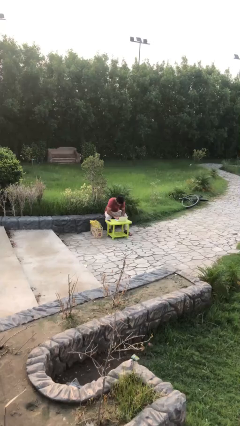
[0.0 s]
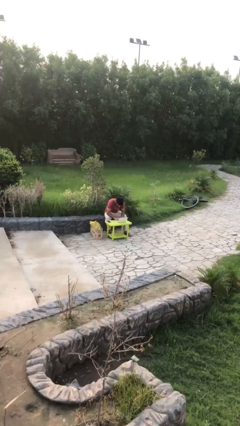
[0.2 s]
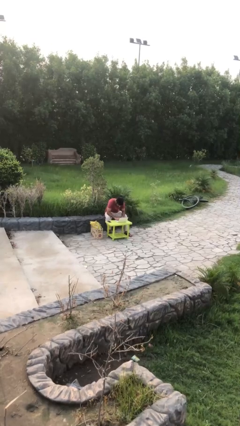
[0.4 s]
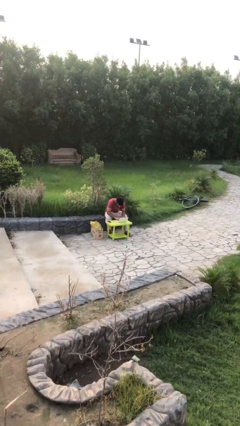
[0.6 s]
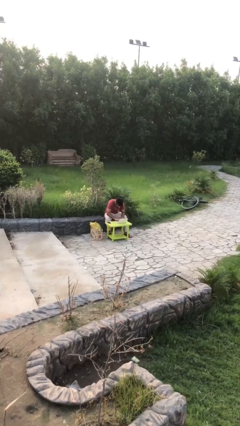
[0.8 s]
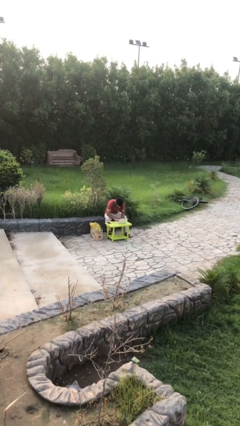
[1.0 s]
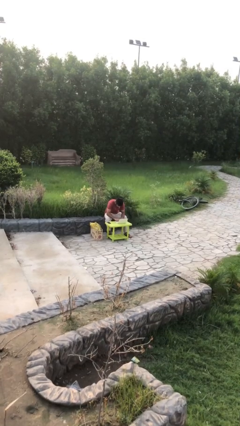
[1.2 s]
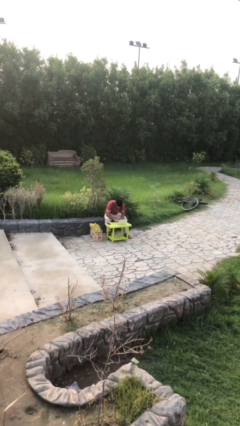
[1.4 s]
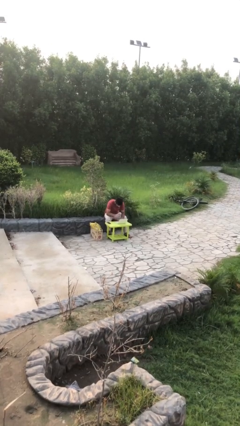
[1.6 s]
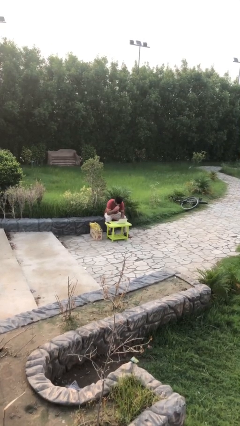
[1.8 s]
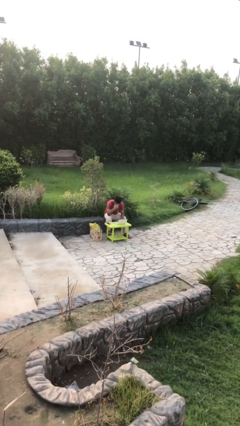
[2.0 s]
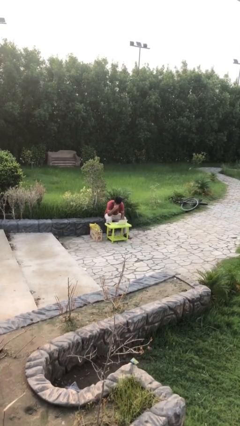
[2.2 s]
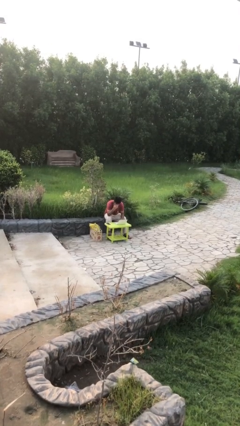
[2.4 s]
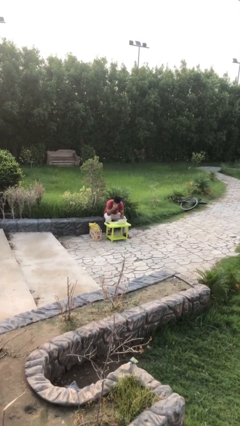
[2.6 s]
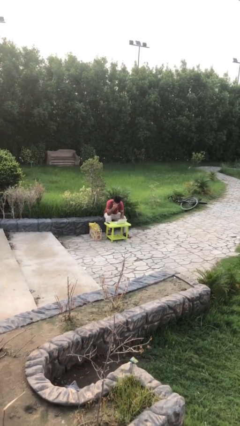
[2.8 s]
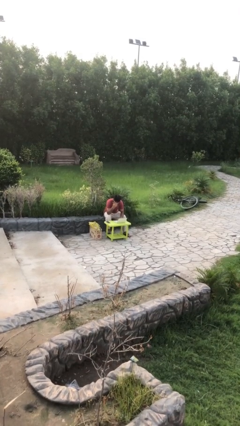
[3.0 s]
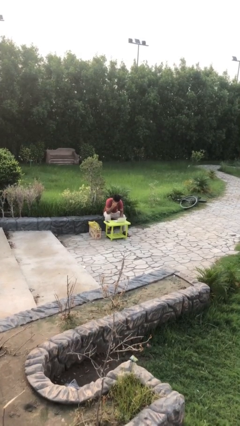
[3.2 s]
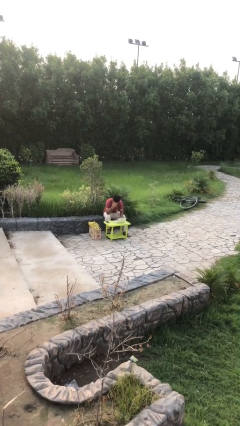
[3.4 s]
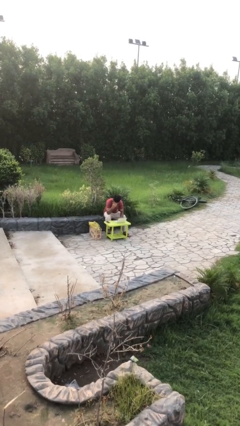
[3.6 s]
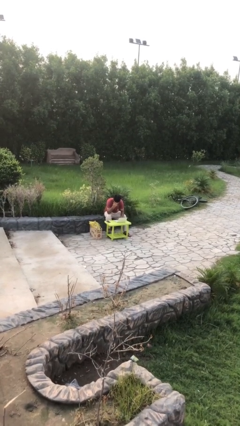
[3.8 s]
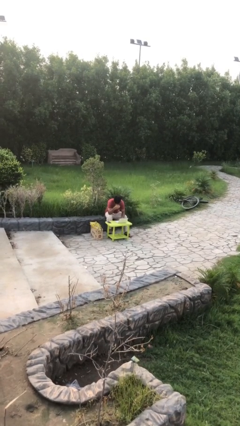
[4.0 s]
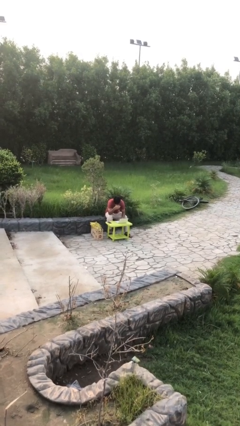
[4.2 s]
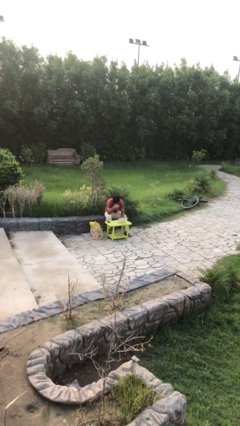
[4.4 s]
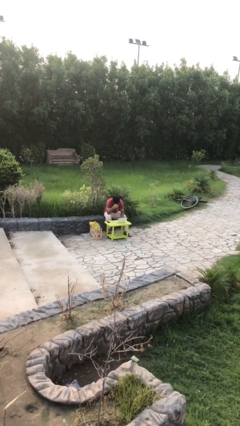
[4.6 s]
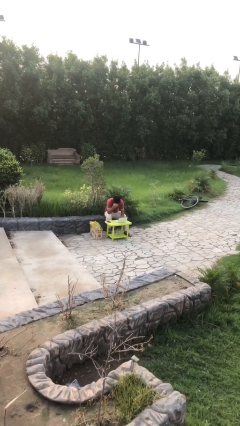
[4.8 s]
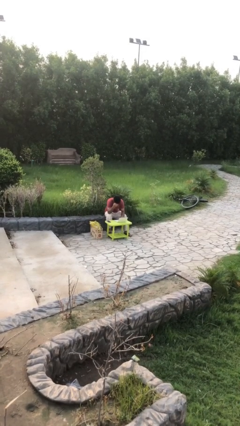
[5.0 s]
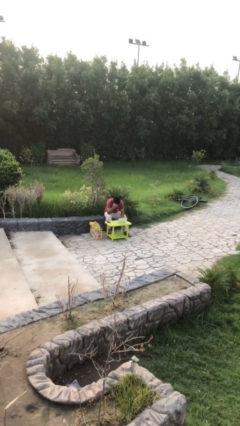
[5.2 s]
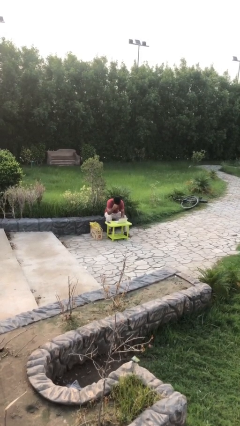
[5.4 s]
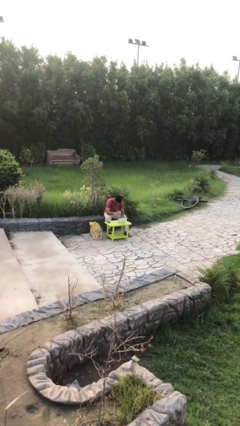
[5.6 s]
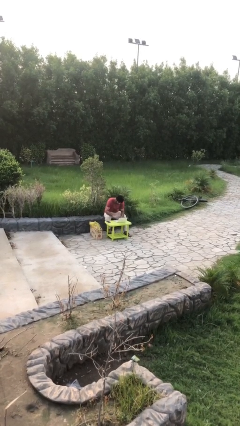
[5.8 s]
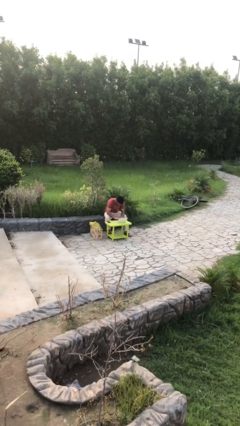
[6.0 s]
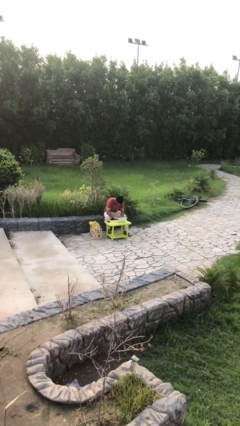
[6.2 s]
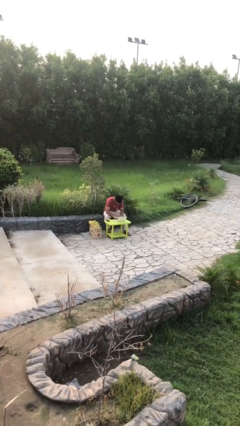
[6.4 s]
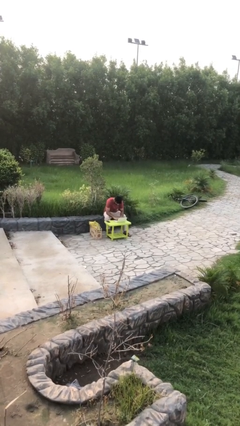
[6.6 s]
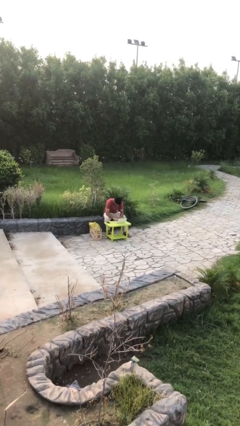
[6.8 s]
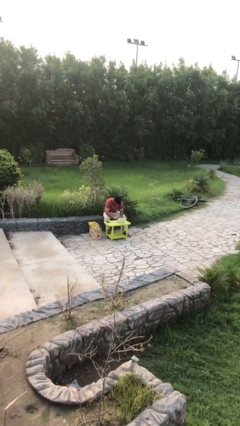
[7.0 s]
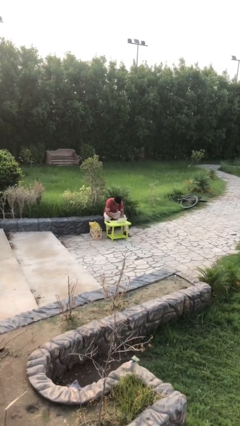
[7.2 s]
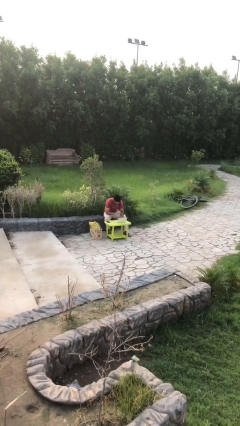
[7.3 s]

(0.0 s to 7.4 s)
person interacts with laptop

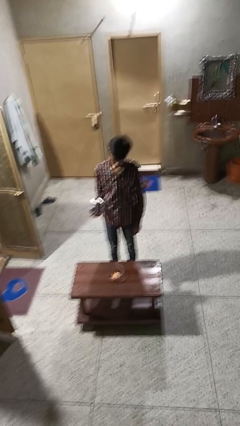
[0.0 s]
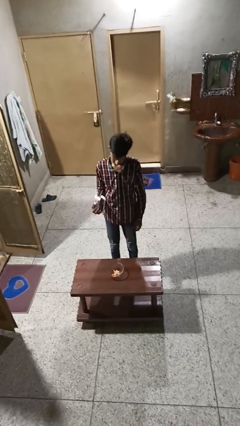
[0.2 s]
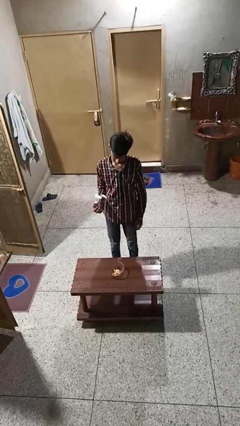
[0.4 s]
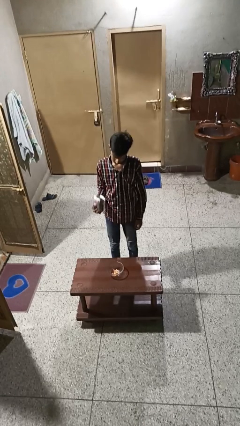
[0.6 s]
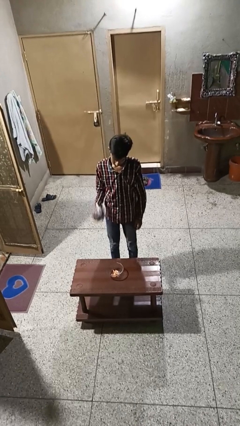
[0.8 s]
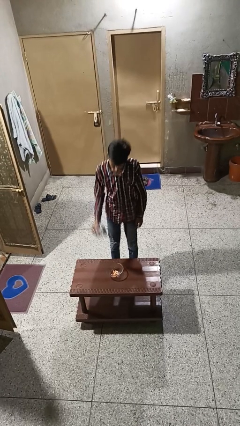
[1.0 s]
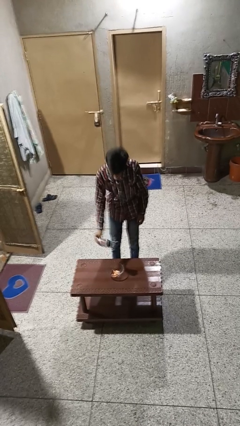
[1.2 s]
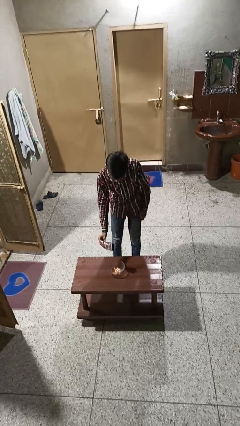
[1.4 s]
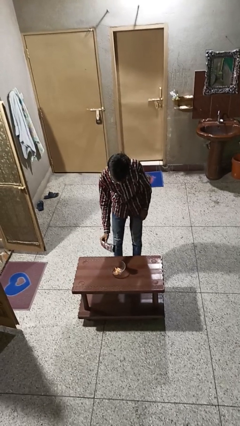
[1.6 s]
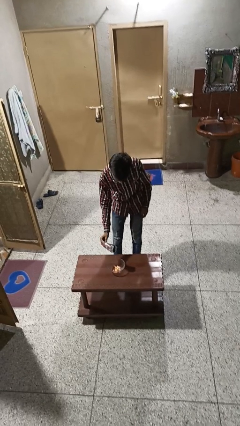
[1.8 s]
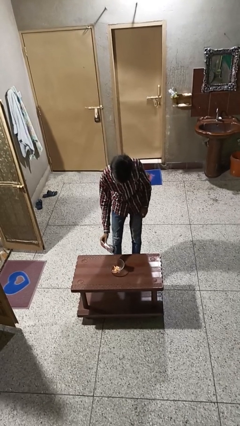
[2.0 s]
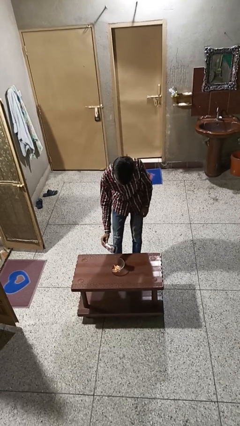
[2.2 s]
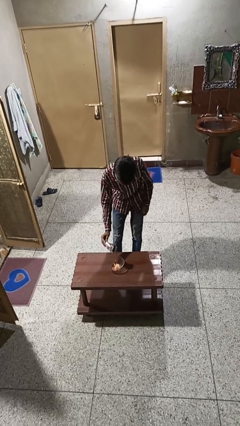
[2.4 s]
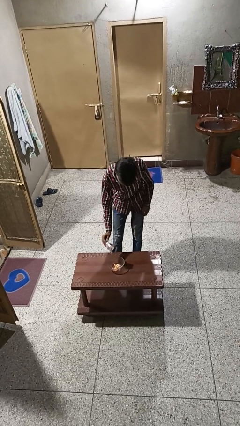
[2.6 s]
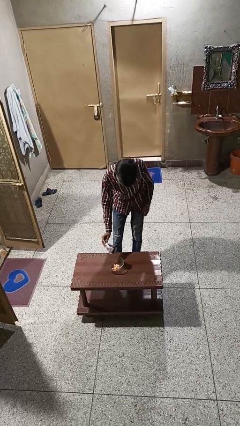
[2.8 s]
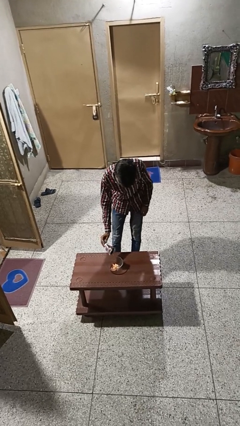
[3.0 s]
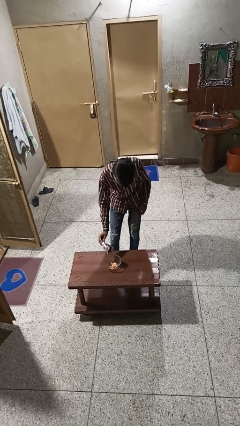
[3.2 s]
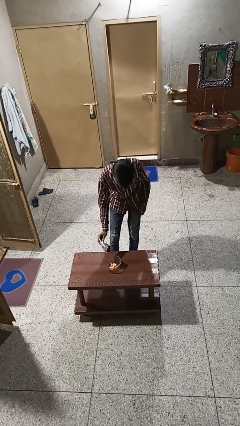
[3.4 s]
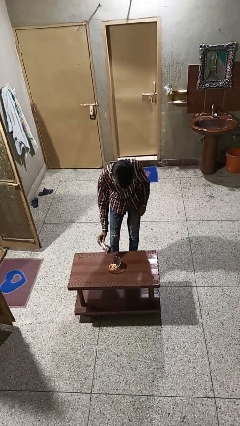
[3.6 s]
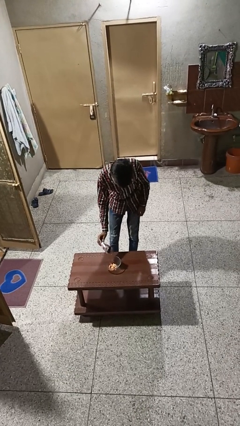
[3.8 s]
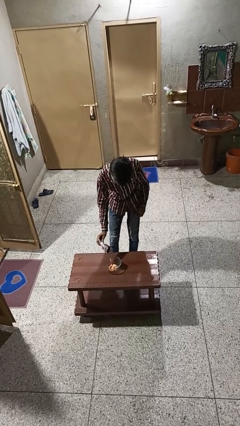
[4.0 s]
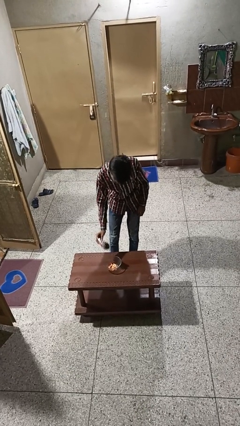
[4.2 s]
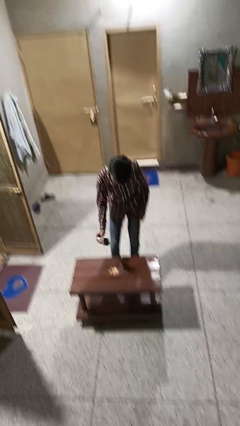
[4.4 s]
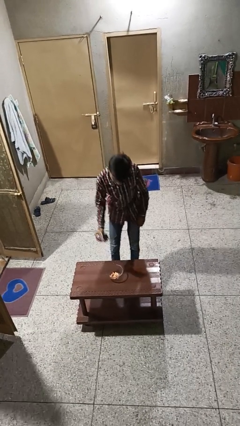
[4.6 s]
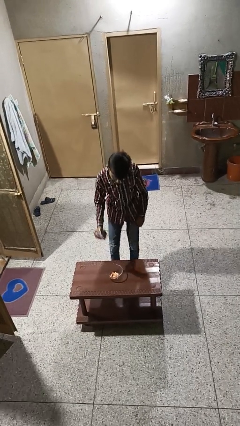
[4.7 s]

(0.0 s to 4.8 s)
person pours into bowl

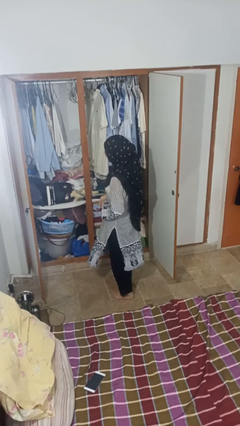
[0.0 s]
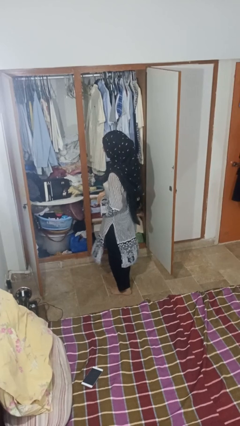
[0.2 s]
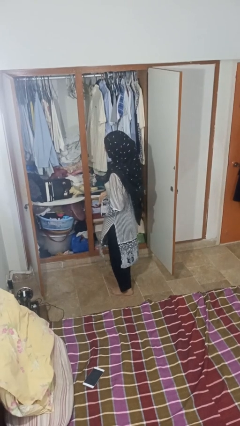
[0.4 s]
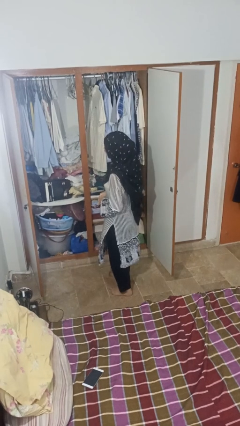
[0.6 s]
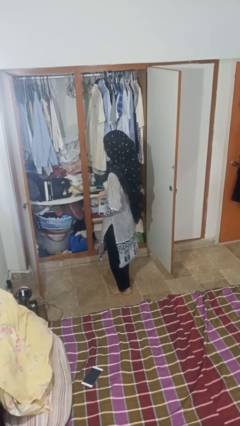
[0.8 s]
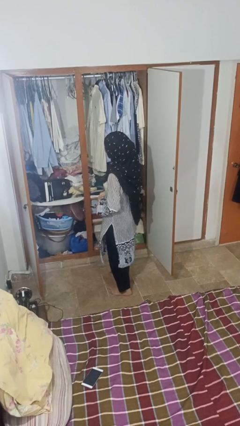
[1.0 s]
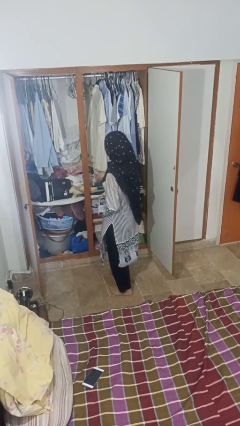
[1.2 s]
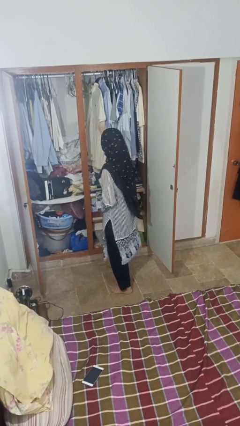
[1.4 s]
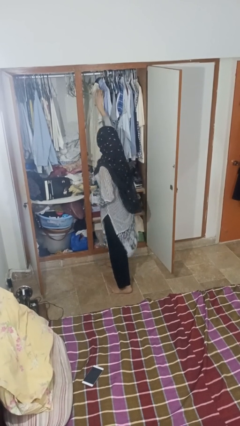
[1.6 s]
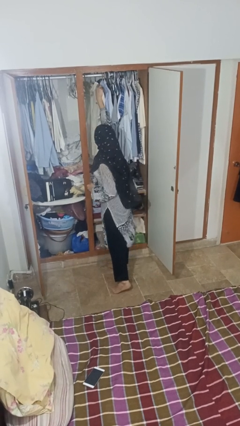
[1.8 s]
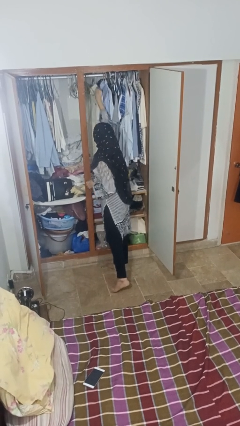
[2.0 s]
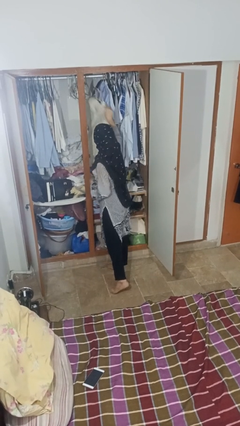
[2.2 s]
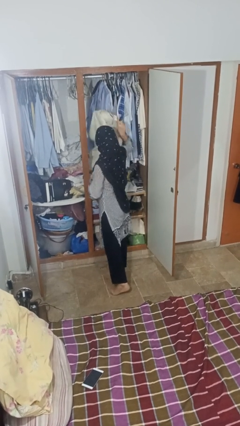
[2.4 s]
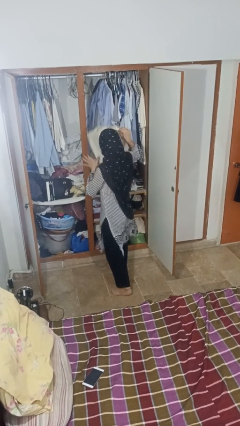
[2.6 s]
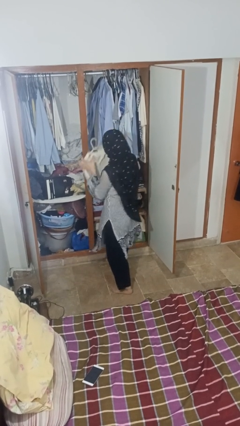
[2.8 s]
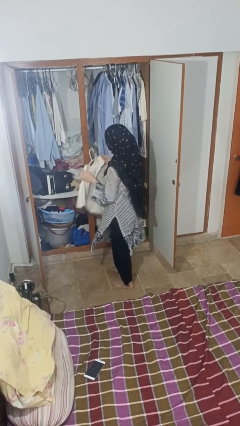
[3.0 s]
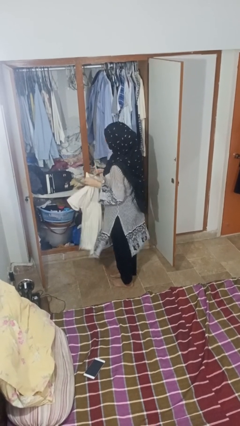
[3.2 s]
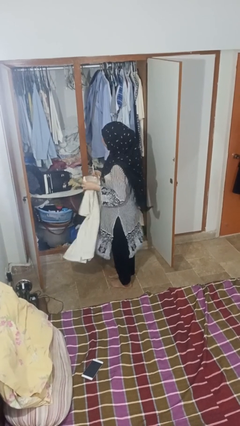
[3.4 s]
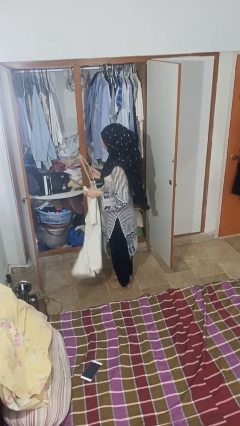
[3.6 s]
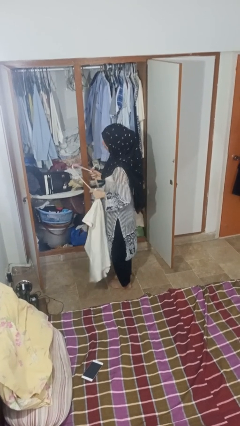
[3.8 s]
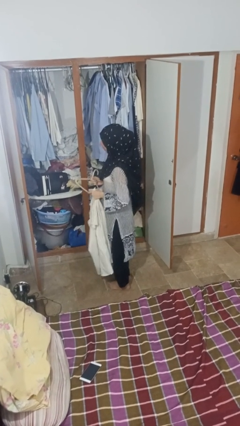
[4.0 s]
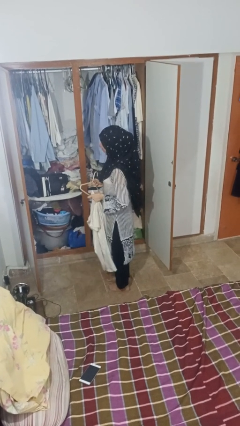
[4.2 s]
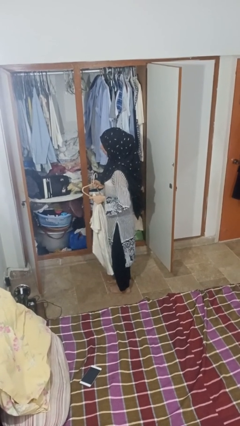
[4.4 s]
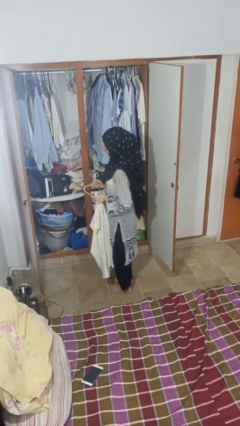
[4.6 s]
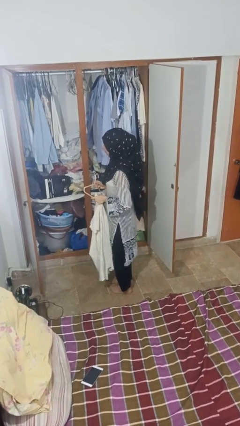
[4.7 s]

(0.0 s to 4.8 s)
person takes clothes from closet

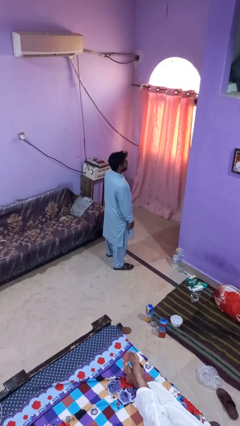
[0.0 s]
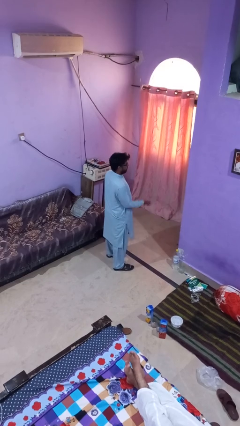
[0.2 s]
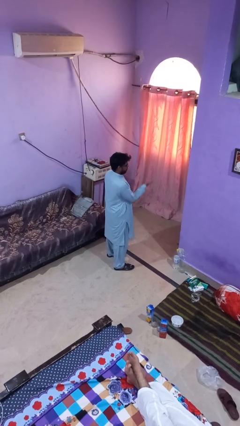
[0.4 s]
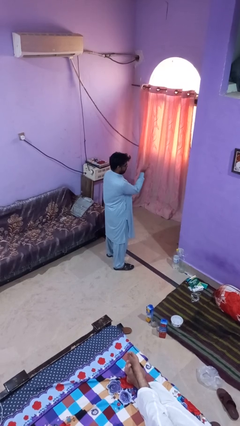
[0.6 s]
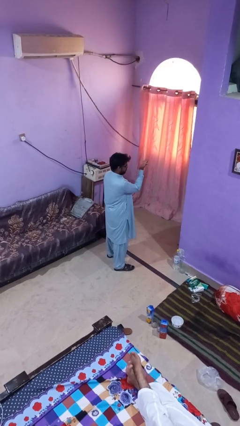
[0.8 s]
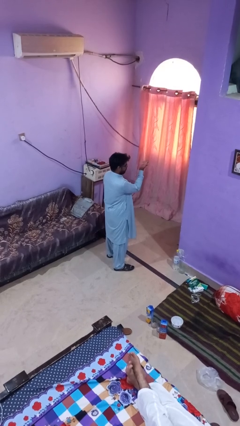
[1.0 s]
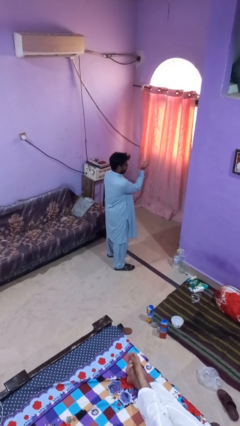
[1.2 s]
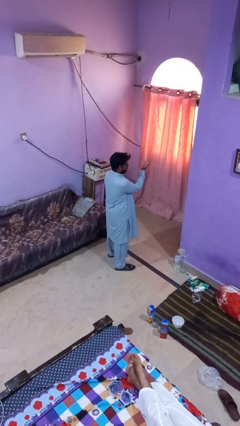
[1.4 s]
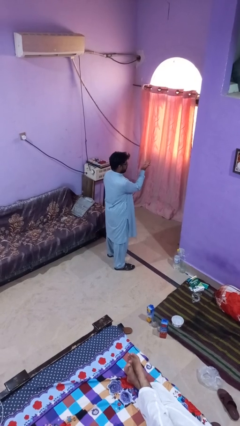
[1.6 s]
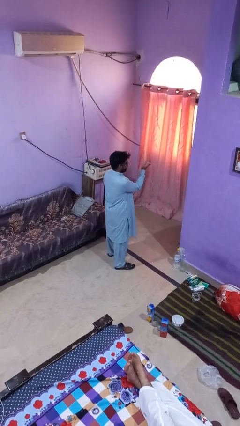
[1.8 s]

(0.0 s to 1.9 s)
person gestures swipe up
